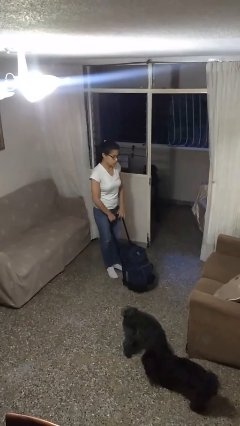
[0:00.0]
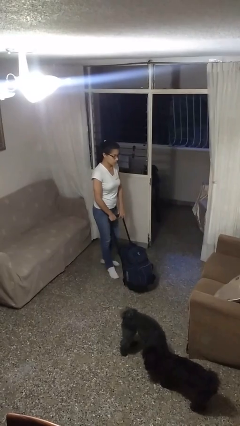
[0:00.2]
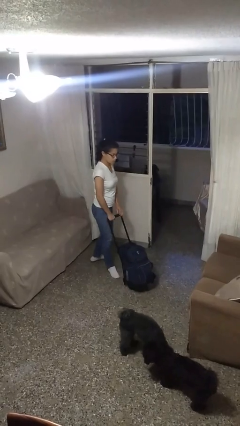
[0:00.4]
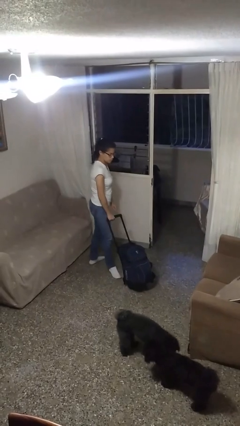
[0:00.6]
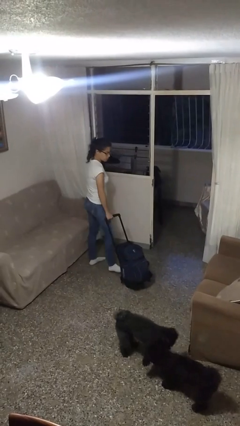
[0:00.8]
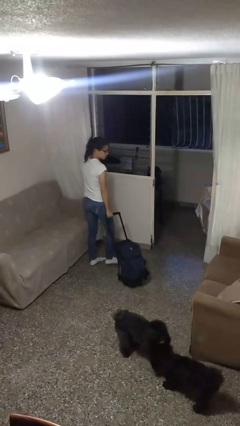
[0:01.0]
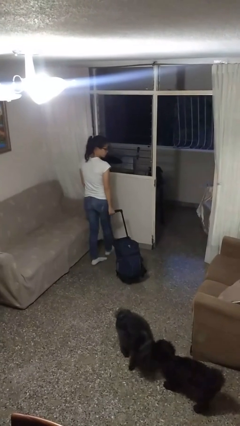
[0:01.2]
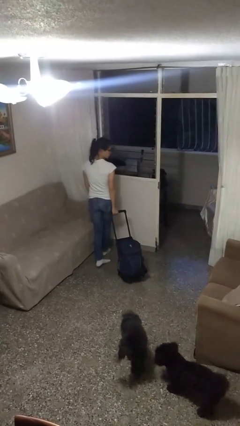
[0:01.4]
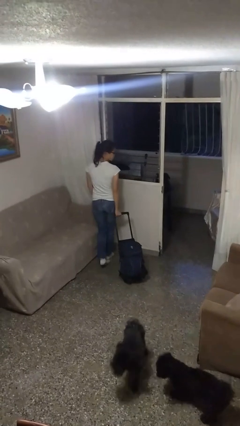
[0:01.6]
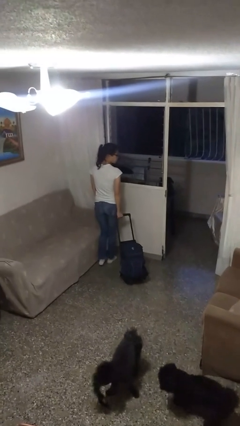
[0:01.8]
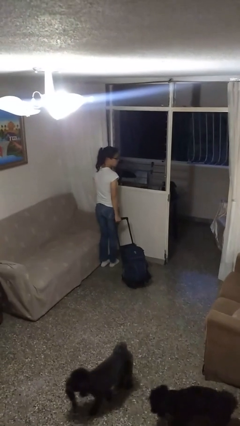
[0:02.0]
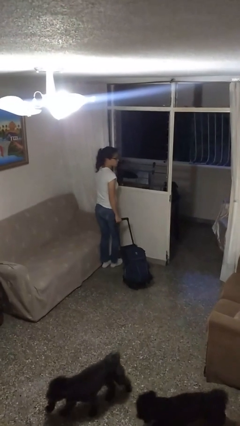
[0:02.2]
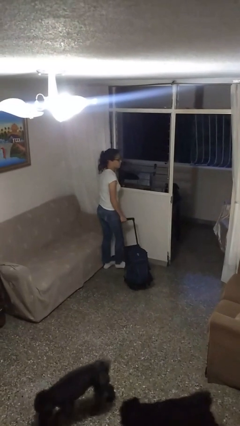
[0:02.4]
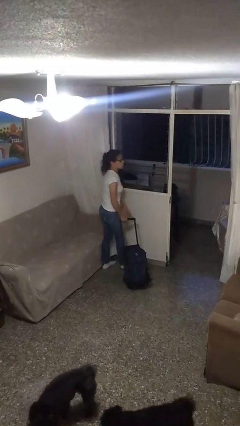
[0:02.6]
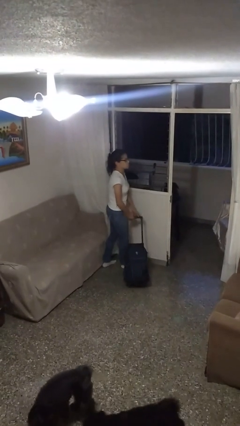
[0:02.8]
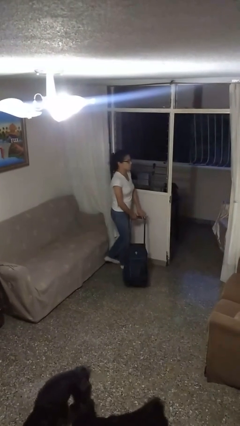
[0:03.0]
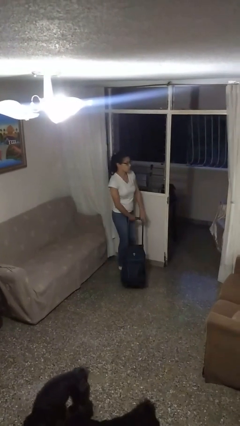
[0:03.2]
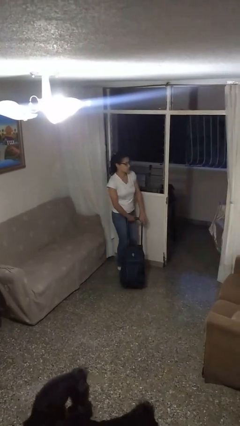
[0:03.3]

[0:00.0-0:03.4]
person pulls wheeled cart

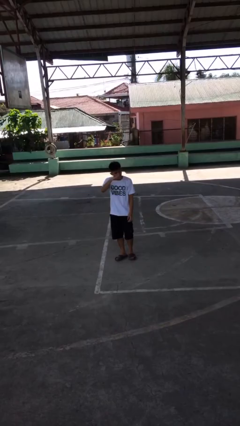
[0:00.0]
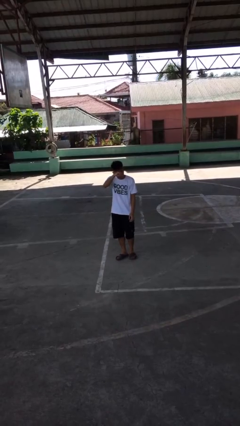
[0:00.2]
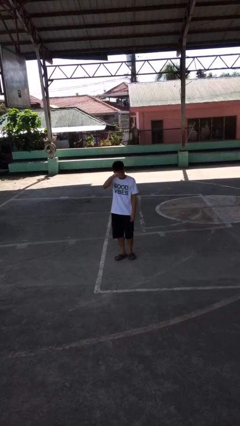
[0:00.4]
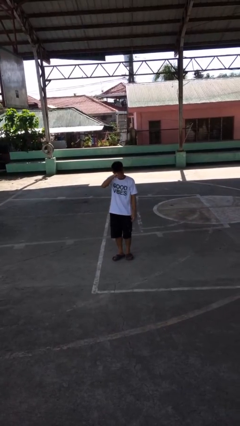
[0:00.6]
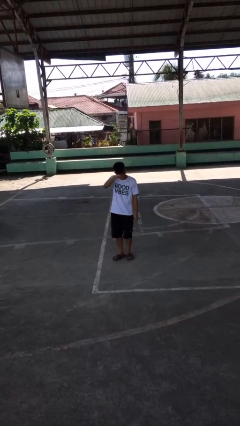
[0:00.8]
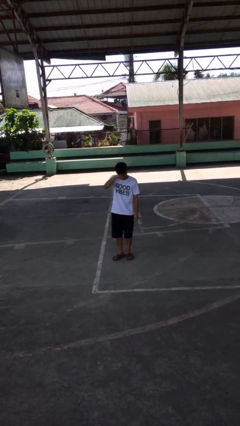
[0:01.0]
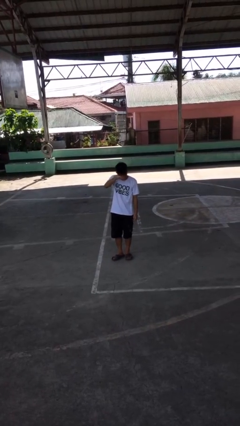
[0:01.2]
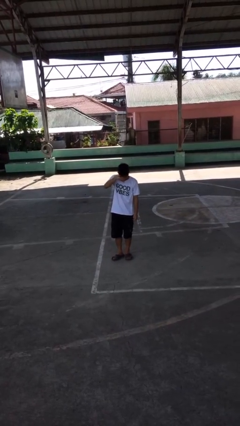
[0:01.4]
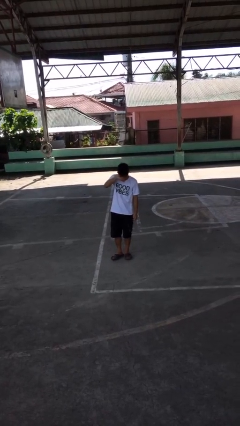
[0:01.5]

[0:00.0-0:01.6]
person rubs eyes

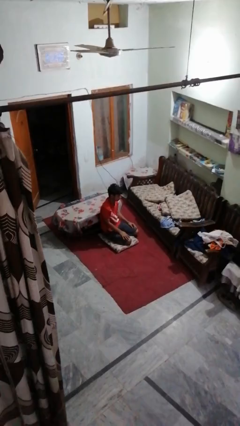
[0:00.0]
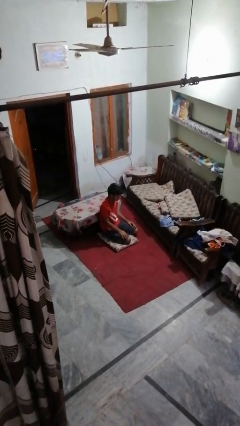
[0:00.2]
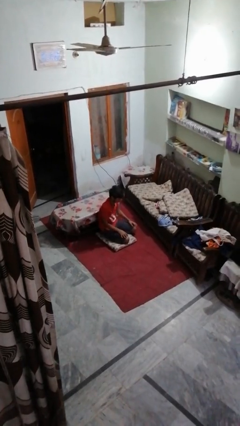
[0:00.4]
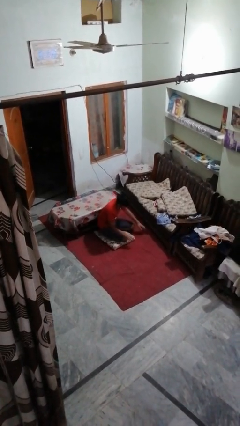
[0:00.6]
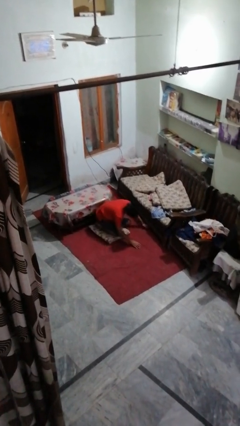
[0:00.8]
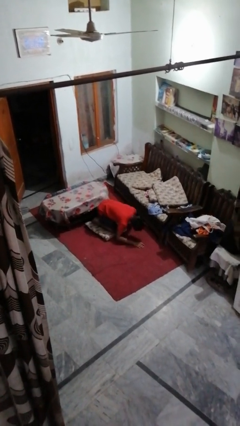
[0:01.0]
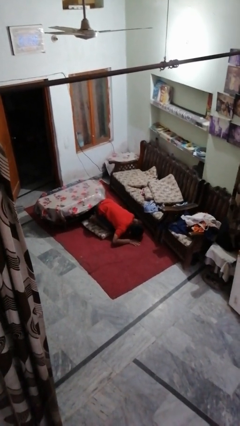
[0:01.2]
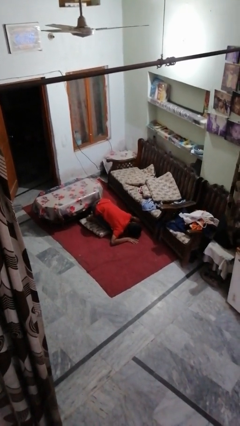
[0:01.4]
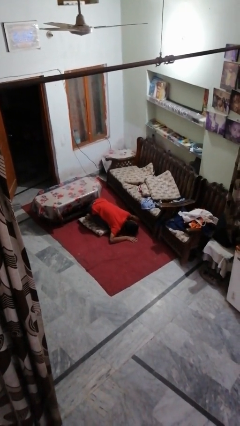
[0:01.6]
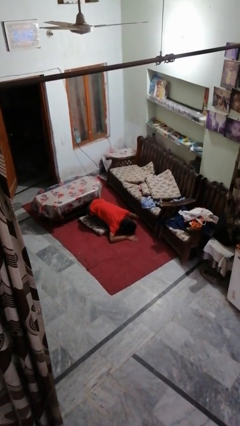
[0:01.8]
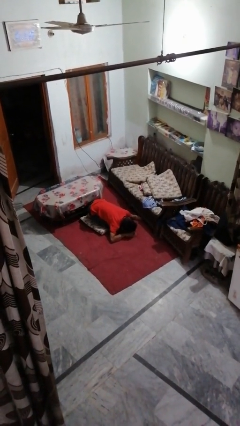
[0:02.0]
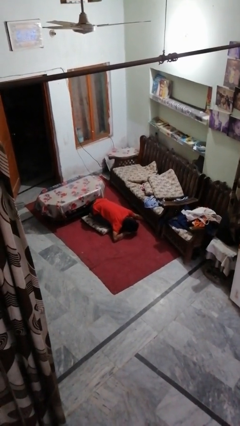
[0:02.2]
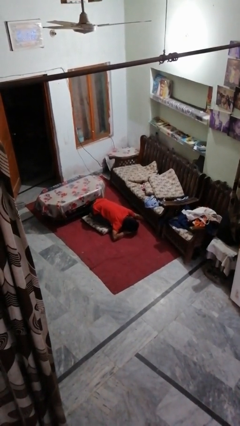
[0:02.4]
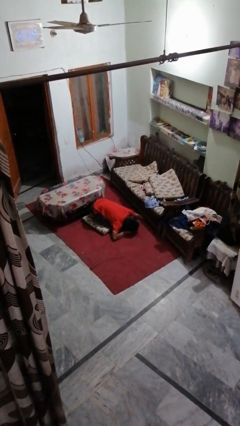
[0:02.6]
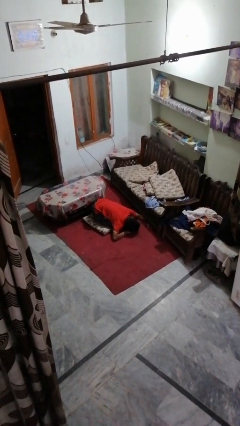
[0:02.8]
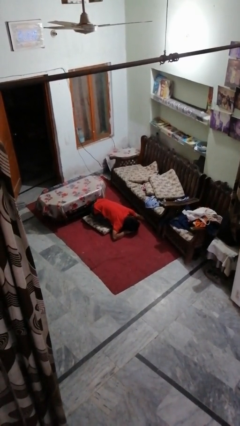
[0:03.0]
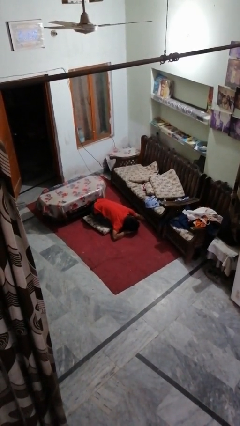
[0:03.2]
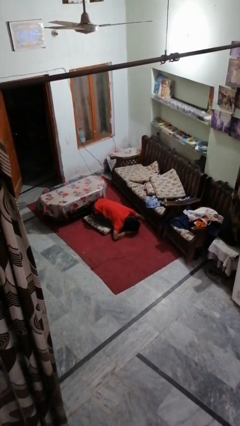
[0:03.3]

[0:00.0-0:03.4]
person searches under couch

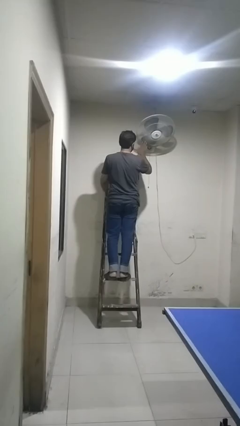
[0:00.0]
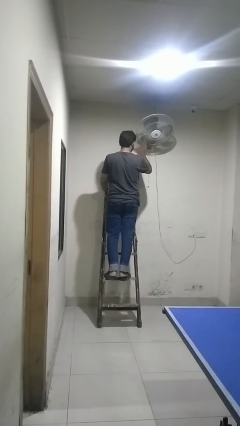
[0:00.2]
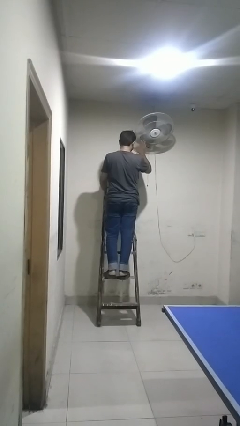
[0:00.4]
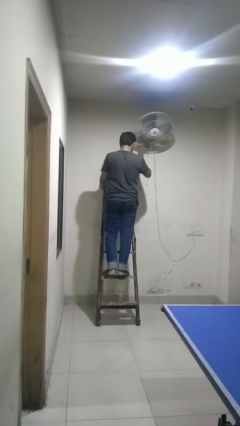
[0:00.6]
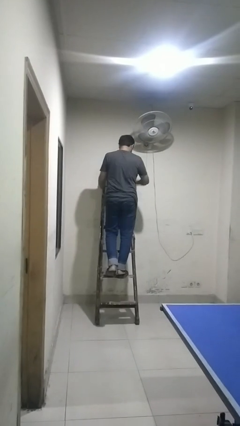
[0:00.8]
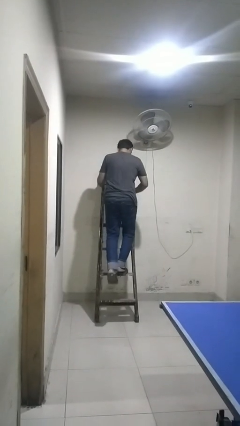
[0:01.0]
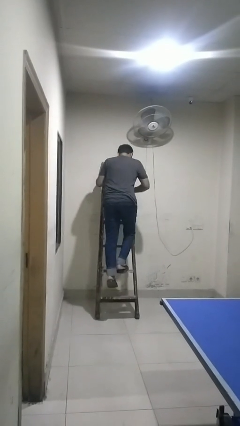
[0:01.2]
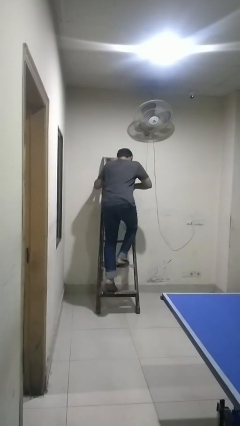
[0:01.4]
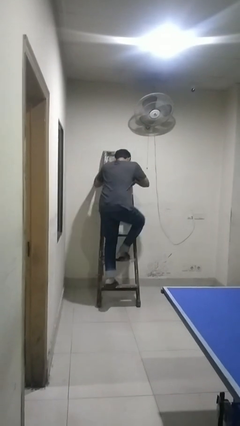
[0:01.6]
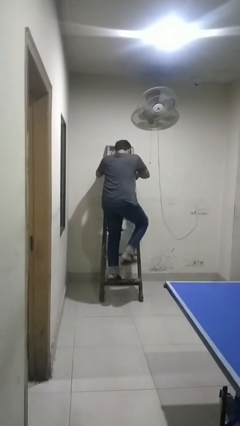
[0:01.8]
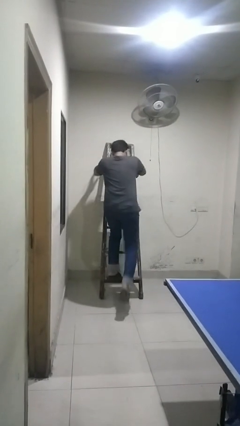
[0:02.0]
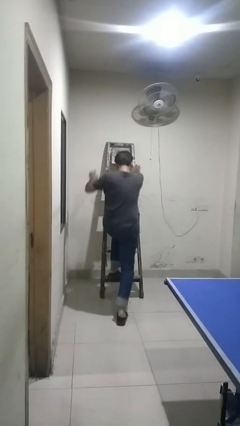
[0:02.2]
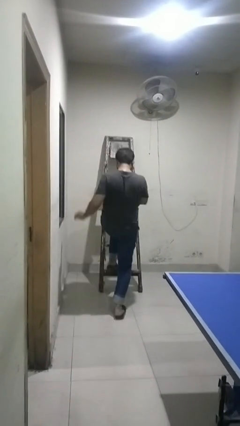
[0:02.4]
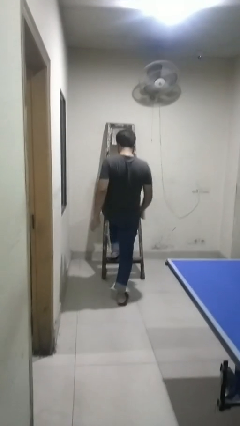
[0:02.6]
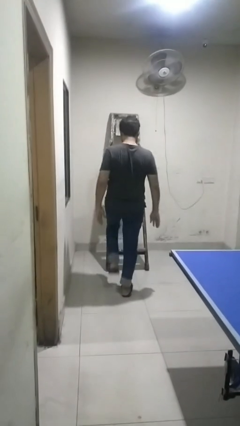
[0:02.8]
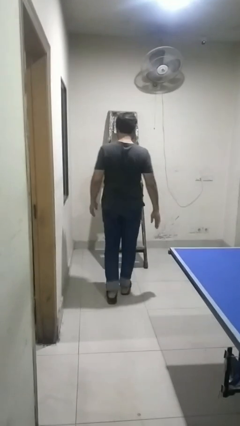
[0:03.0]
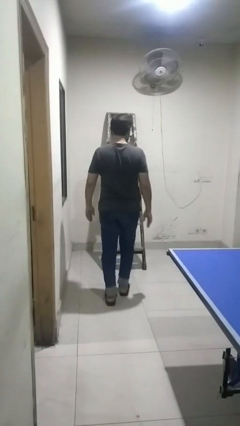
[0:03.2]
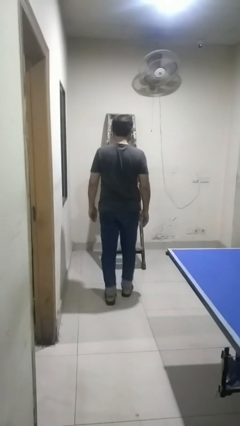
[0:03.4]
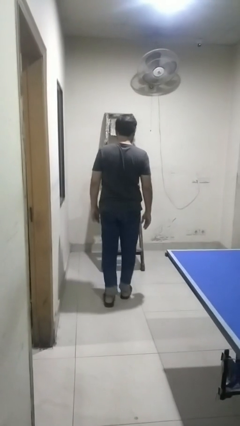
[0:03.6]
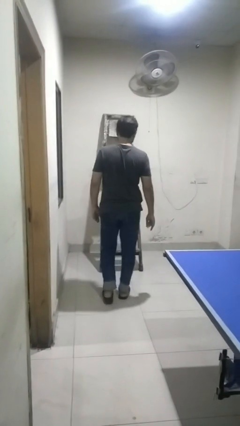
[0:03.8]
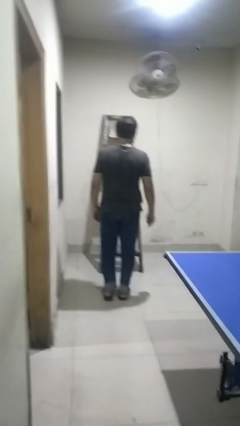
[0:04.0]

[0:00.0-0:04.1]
person climbs down ladder

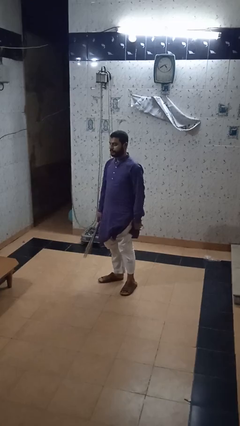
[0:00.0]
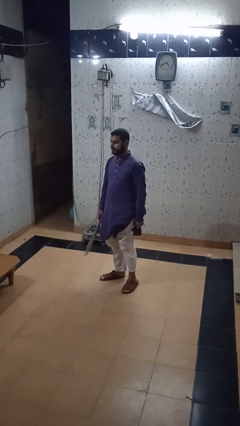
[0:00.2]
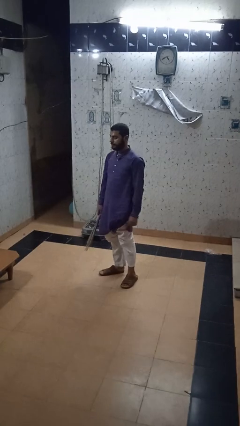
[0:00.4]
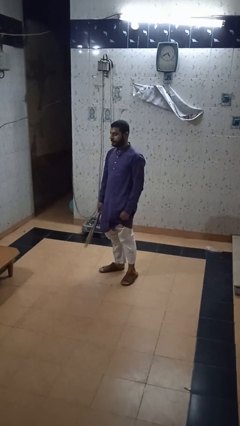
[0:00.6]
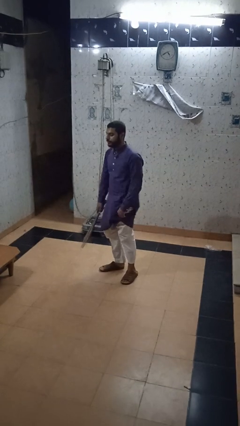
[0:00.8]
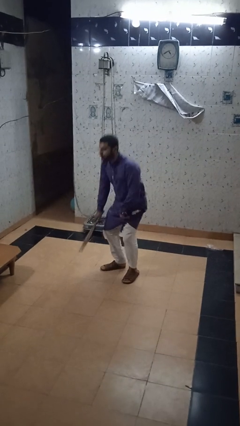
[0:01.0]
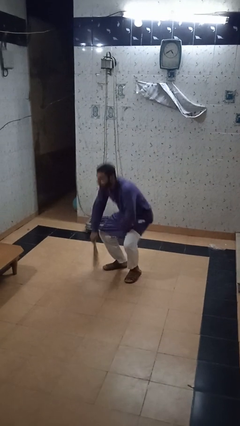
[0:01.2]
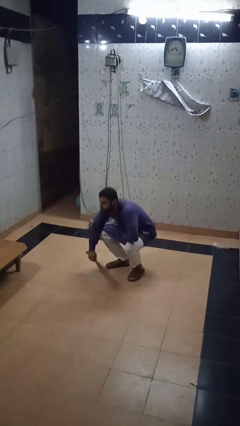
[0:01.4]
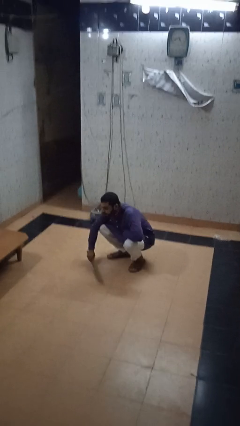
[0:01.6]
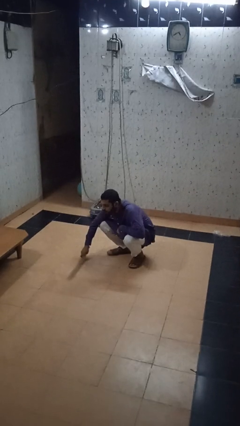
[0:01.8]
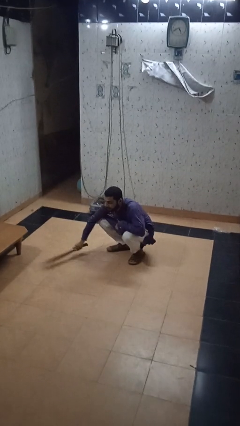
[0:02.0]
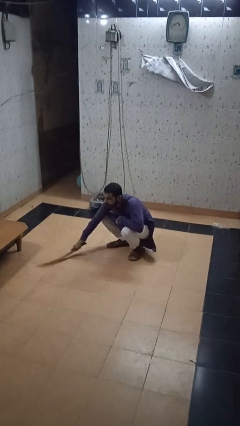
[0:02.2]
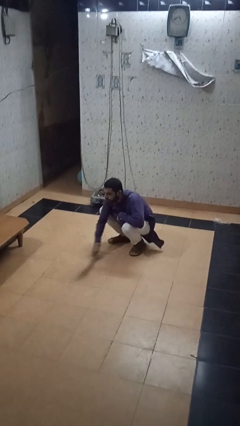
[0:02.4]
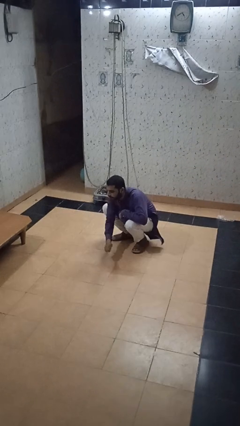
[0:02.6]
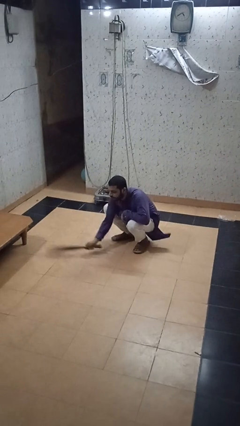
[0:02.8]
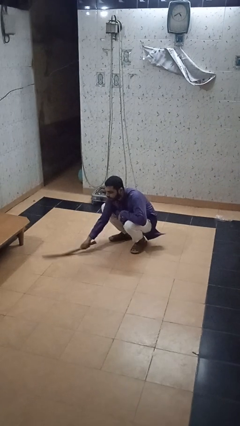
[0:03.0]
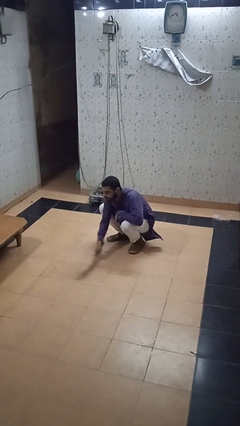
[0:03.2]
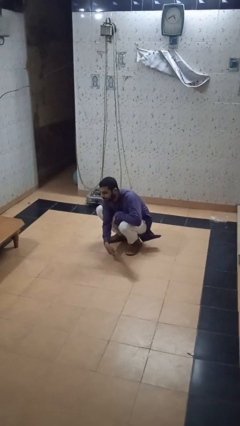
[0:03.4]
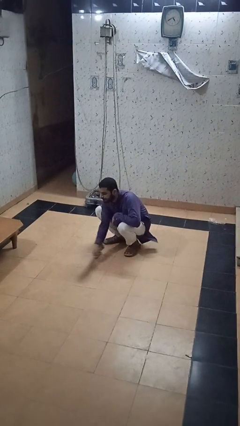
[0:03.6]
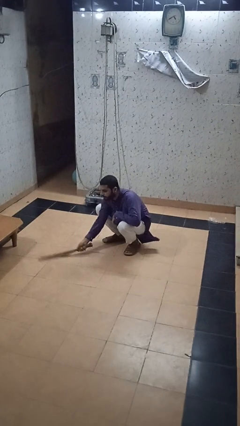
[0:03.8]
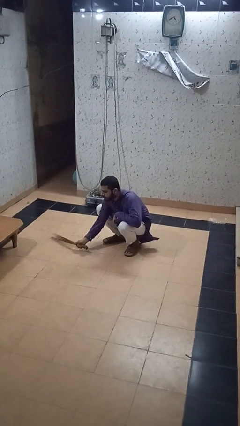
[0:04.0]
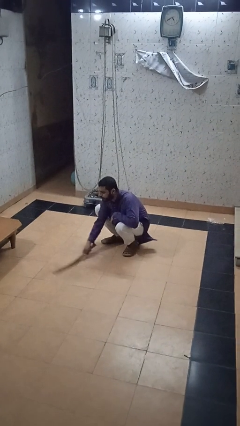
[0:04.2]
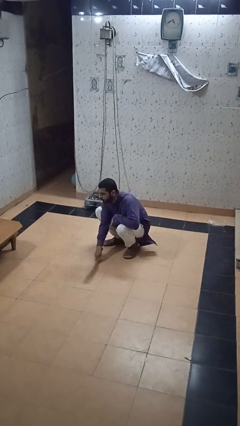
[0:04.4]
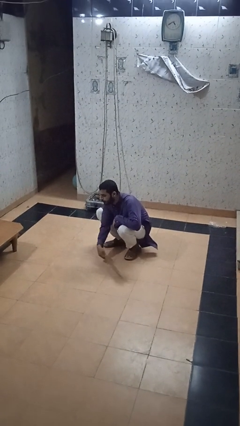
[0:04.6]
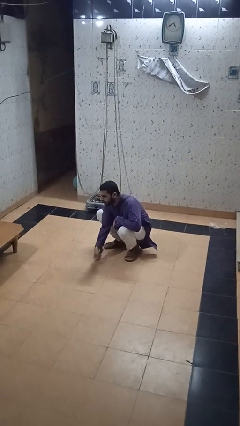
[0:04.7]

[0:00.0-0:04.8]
person sweeps floor

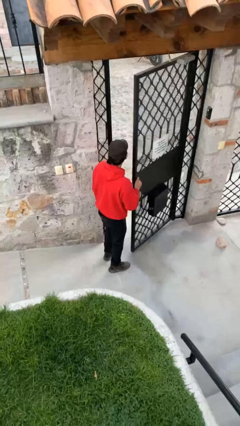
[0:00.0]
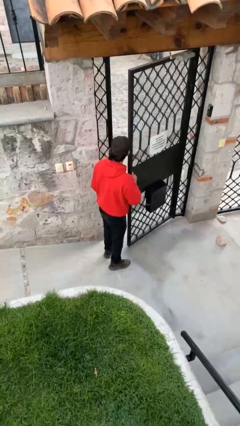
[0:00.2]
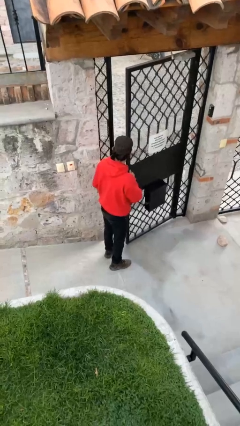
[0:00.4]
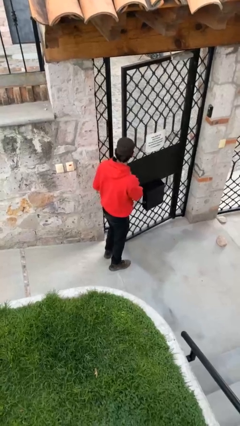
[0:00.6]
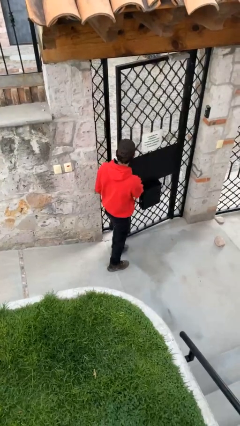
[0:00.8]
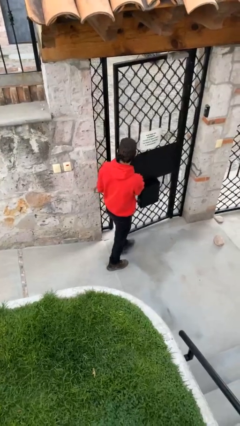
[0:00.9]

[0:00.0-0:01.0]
person closes facility door
